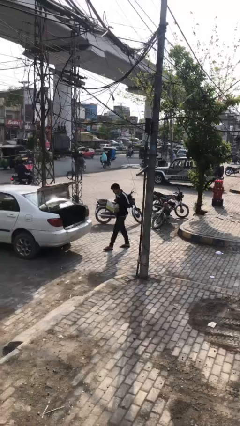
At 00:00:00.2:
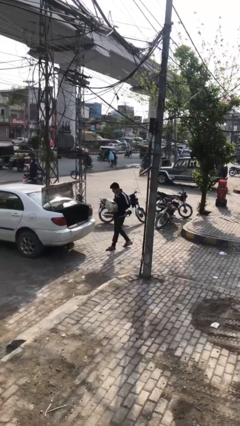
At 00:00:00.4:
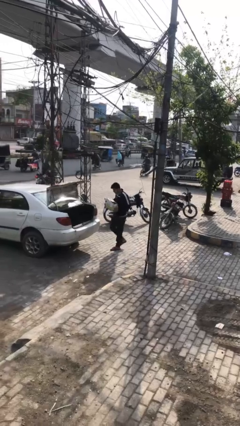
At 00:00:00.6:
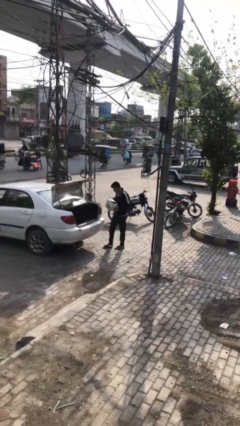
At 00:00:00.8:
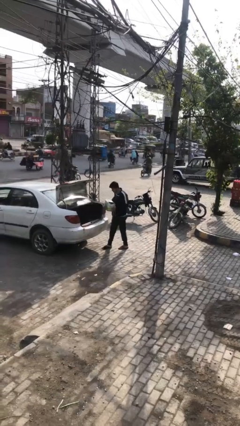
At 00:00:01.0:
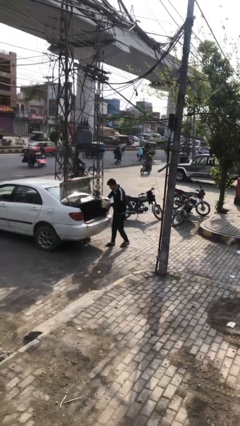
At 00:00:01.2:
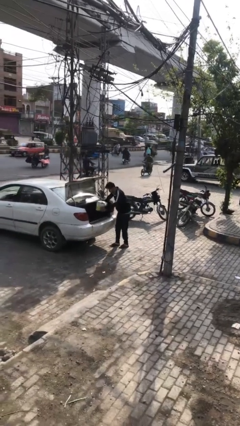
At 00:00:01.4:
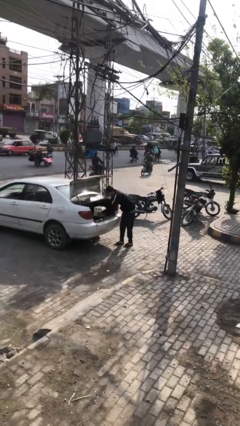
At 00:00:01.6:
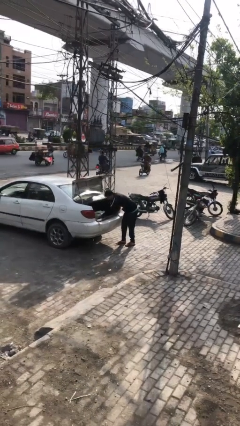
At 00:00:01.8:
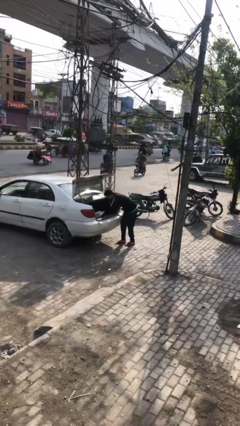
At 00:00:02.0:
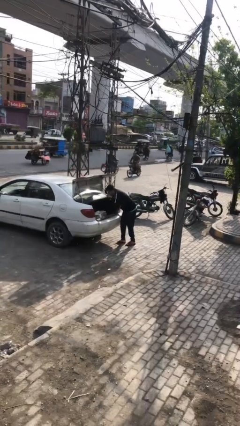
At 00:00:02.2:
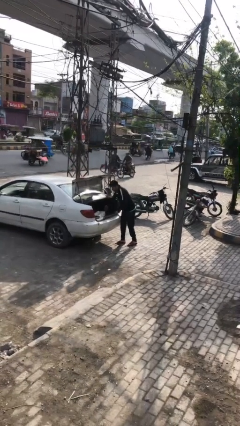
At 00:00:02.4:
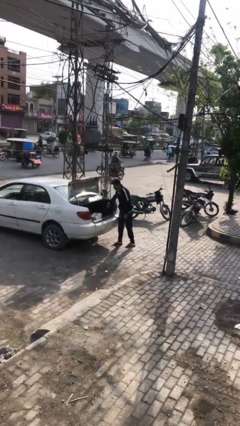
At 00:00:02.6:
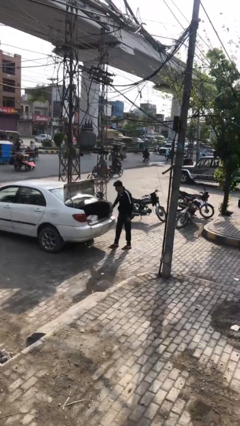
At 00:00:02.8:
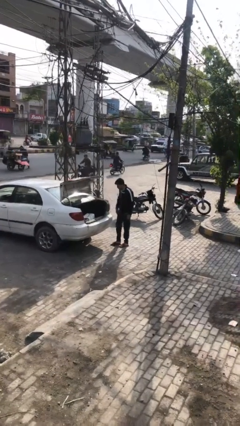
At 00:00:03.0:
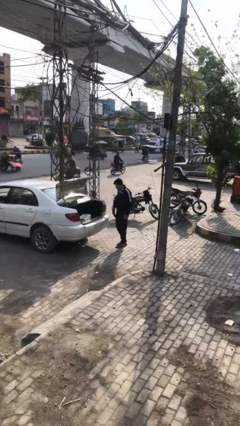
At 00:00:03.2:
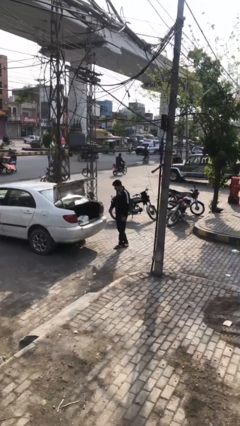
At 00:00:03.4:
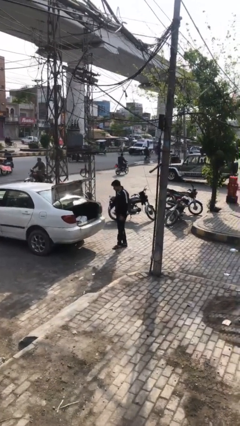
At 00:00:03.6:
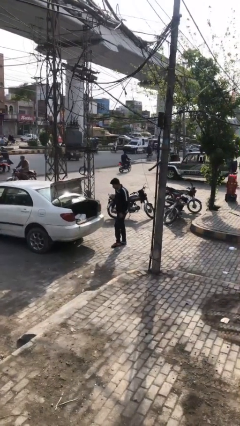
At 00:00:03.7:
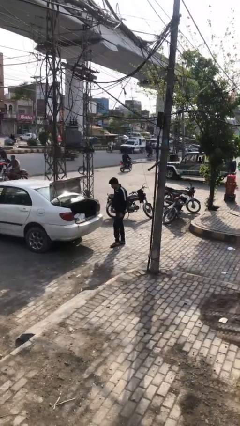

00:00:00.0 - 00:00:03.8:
person loads car

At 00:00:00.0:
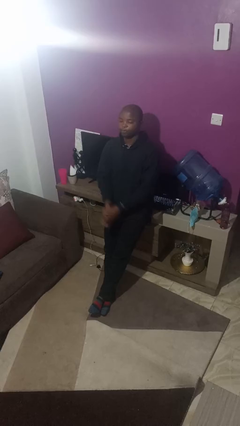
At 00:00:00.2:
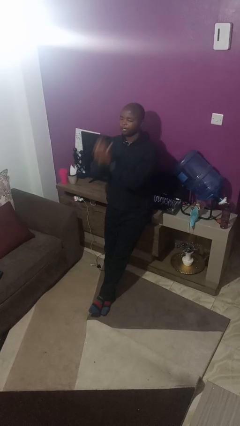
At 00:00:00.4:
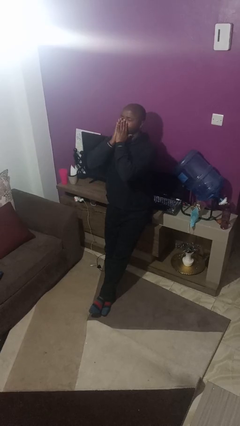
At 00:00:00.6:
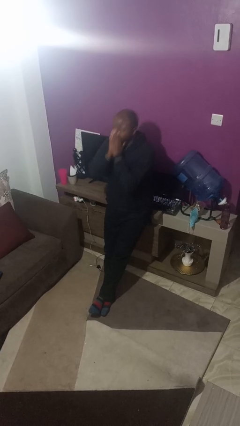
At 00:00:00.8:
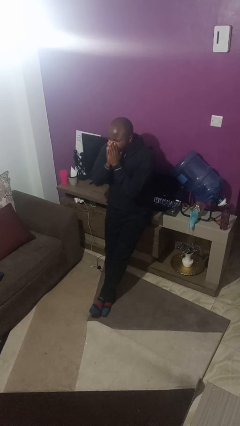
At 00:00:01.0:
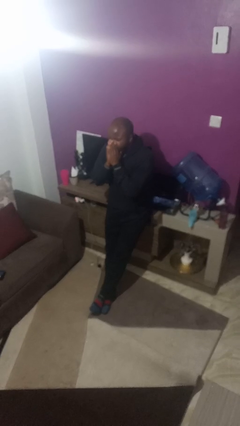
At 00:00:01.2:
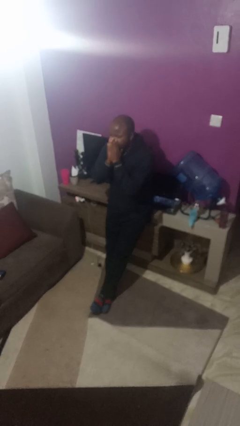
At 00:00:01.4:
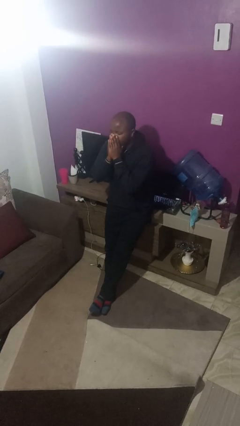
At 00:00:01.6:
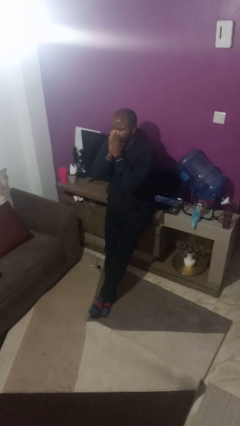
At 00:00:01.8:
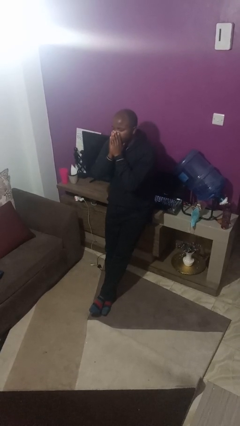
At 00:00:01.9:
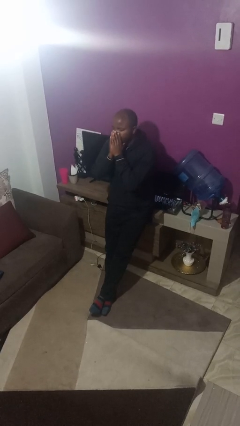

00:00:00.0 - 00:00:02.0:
person sneezes into hand

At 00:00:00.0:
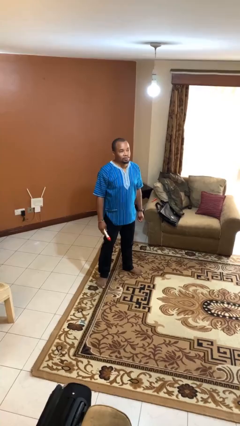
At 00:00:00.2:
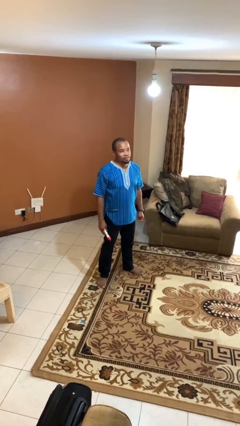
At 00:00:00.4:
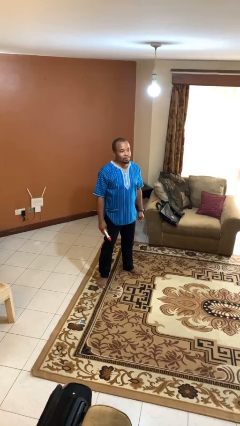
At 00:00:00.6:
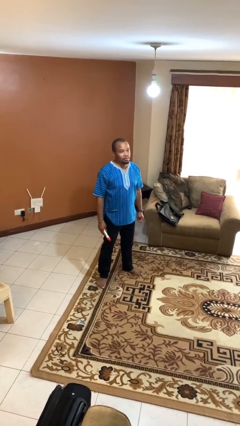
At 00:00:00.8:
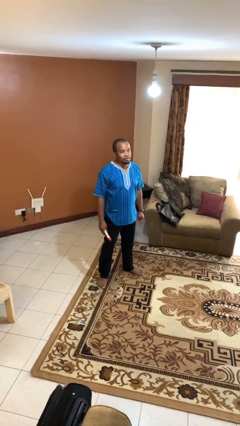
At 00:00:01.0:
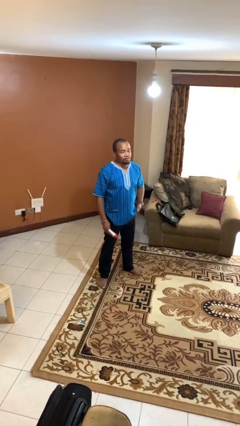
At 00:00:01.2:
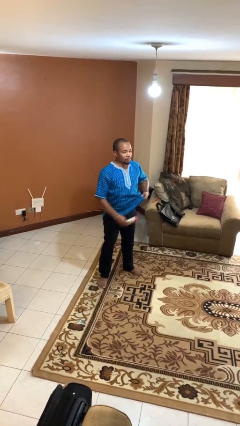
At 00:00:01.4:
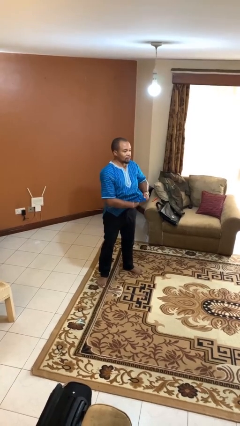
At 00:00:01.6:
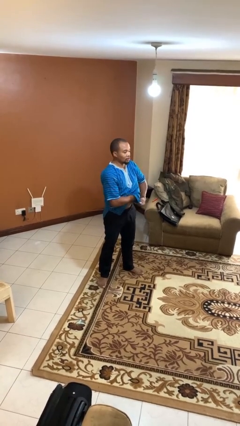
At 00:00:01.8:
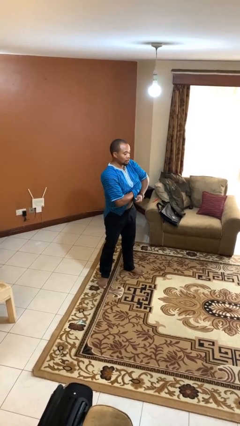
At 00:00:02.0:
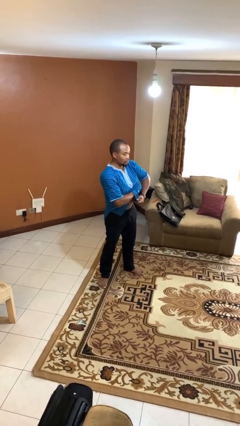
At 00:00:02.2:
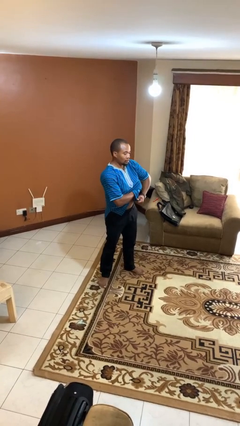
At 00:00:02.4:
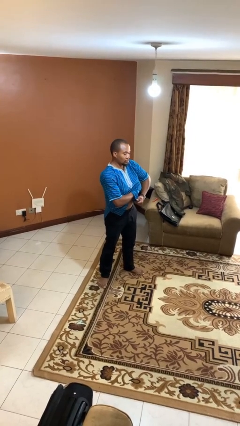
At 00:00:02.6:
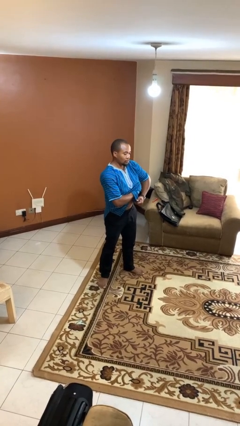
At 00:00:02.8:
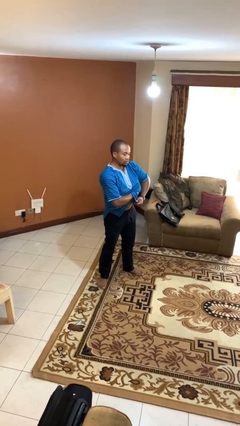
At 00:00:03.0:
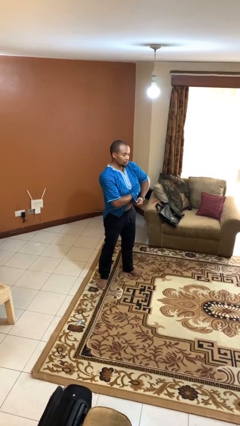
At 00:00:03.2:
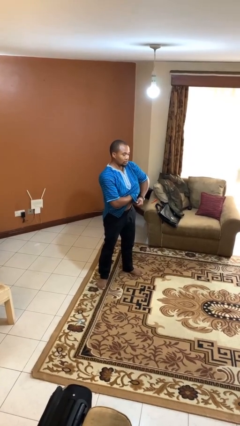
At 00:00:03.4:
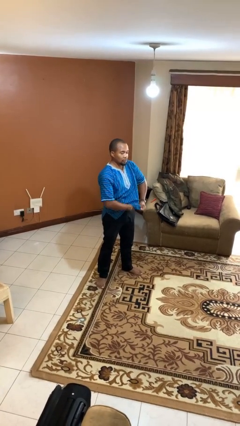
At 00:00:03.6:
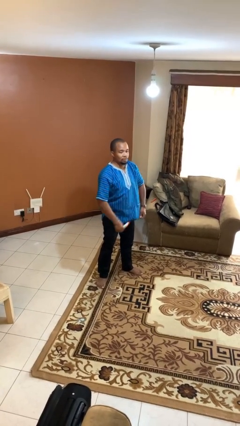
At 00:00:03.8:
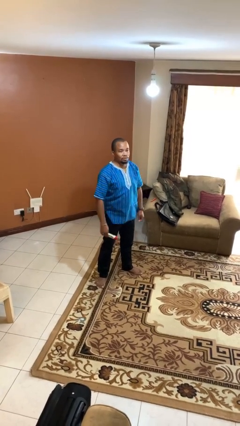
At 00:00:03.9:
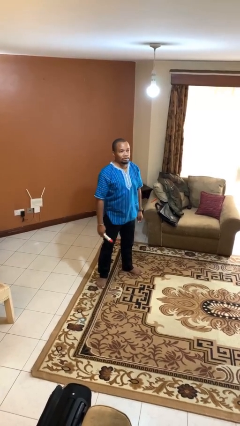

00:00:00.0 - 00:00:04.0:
person applies deodorant

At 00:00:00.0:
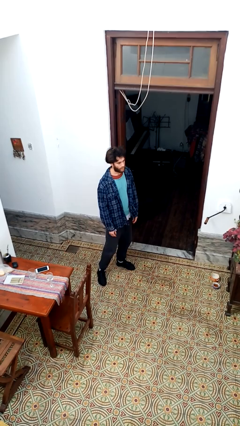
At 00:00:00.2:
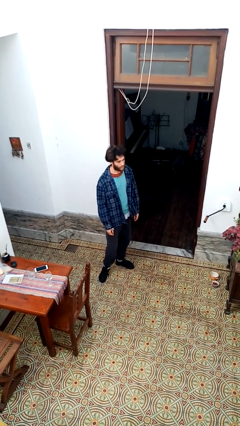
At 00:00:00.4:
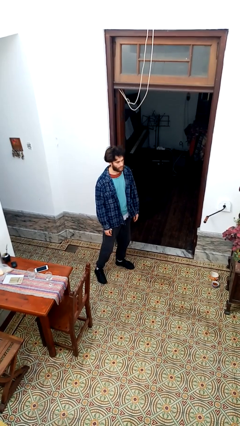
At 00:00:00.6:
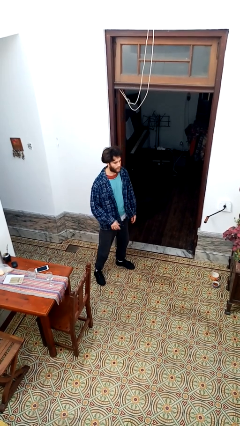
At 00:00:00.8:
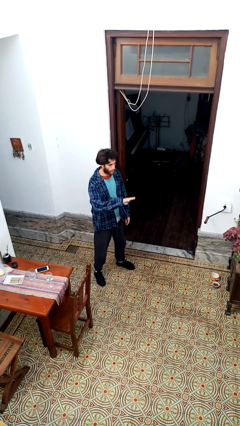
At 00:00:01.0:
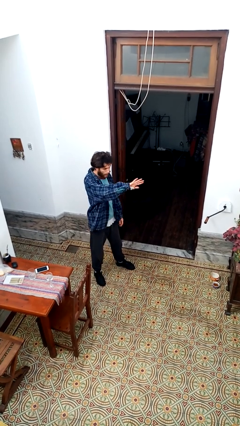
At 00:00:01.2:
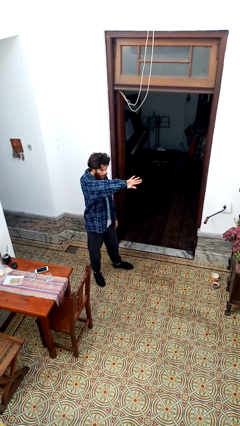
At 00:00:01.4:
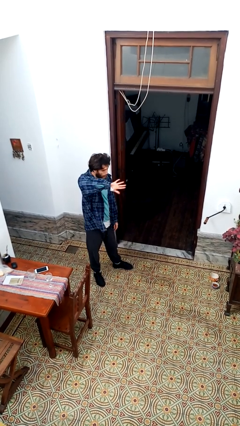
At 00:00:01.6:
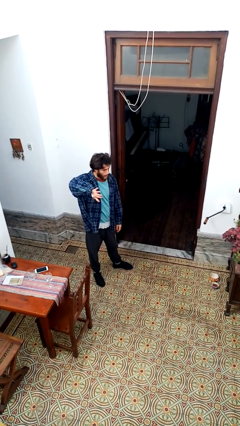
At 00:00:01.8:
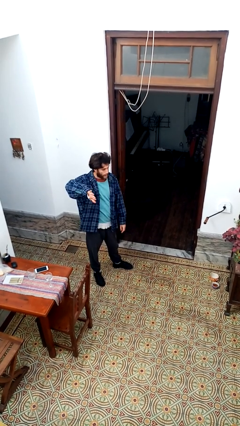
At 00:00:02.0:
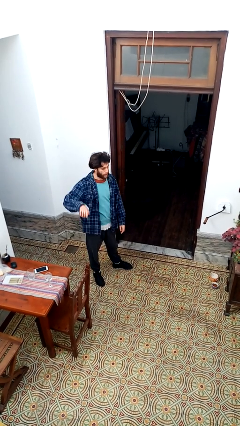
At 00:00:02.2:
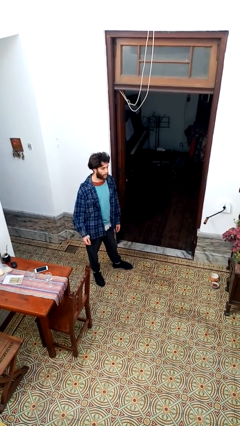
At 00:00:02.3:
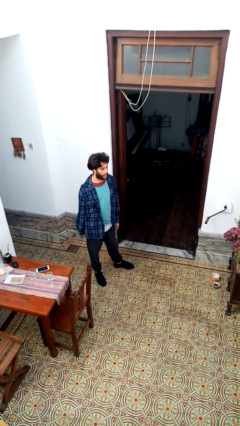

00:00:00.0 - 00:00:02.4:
person gestures swipe right

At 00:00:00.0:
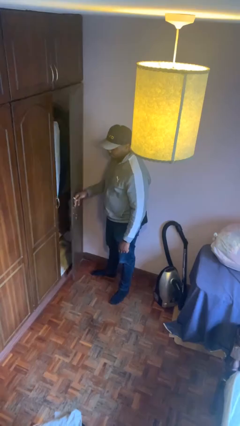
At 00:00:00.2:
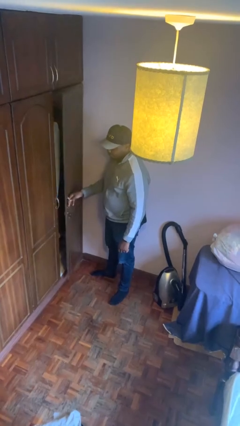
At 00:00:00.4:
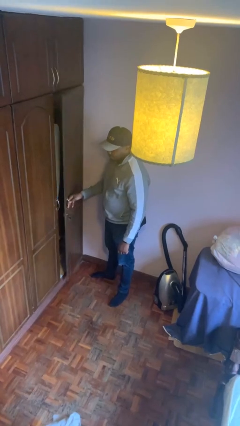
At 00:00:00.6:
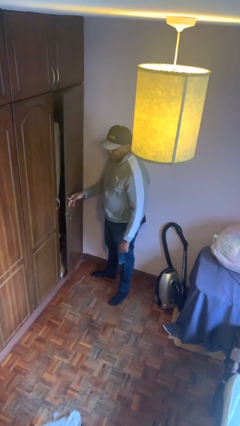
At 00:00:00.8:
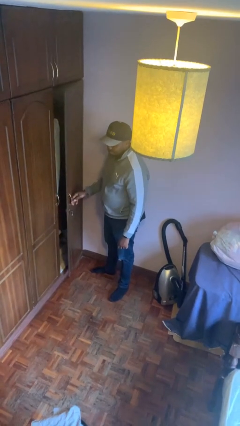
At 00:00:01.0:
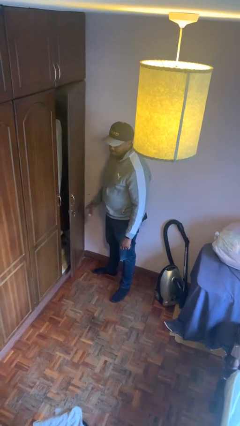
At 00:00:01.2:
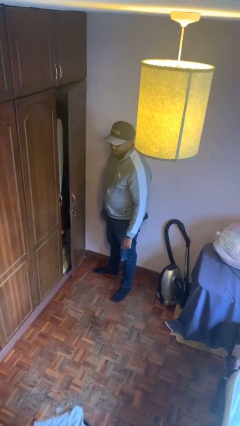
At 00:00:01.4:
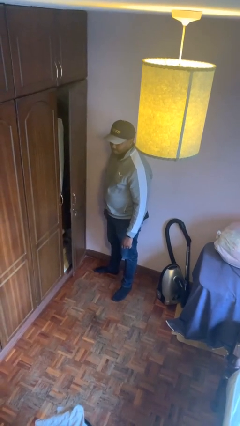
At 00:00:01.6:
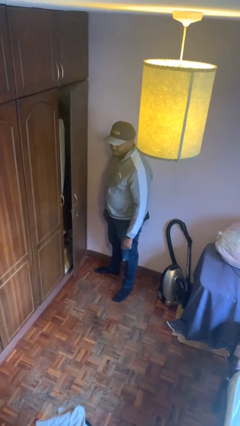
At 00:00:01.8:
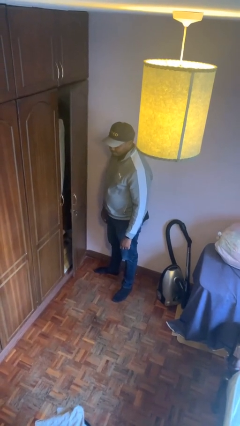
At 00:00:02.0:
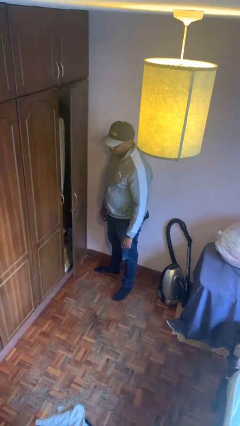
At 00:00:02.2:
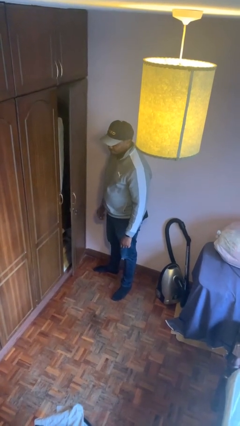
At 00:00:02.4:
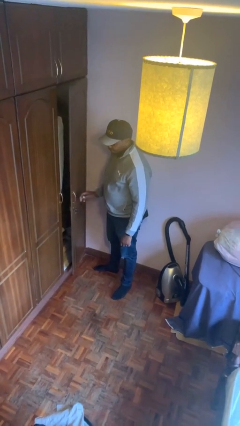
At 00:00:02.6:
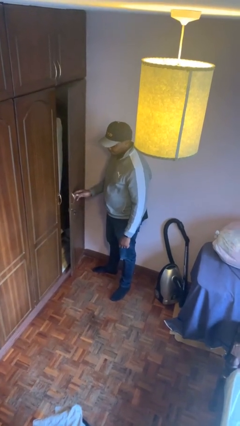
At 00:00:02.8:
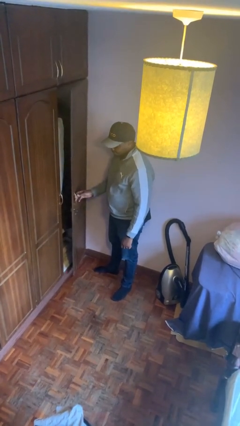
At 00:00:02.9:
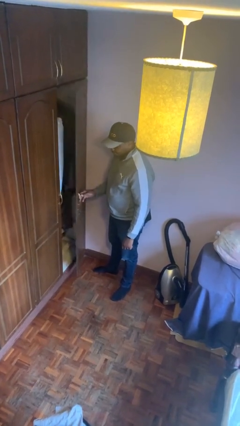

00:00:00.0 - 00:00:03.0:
person closes closet door

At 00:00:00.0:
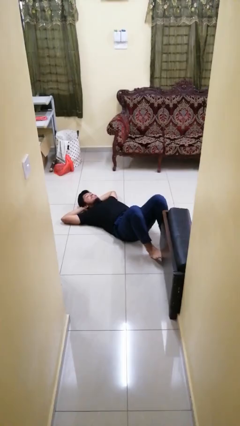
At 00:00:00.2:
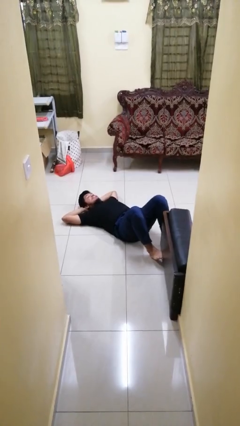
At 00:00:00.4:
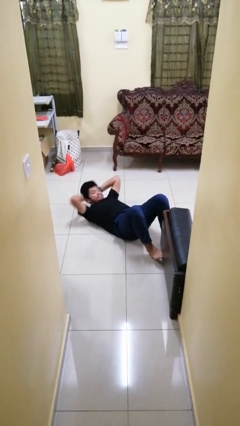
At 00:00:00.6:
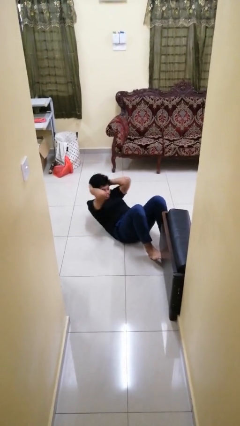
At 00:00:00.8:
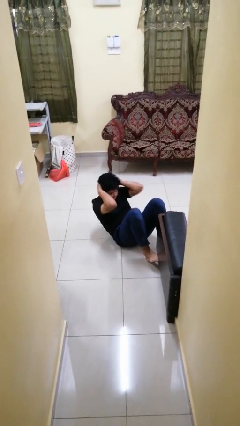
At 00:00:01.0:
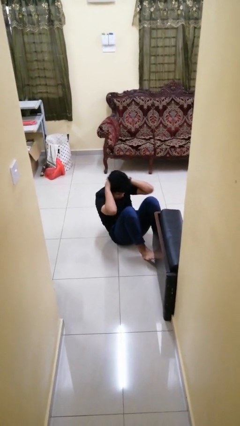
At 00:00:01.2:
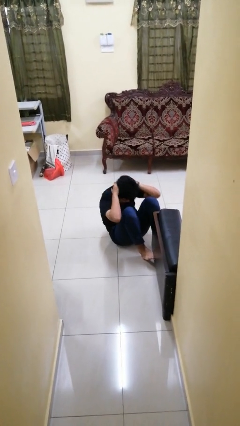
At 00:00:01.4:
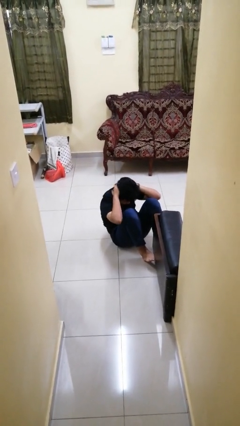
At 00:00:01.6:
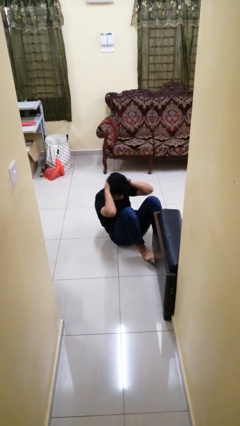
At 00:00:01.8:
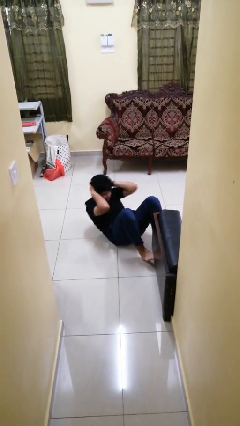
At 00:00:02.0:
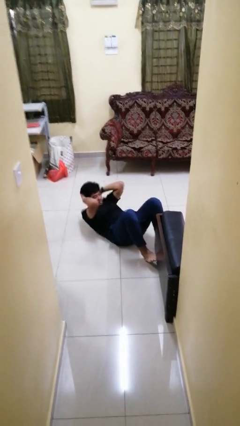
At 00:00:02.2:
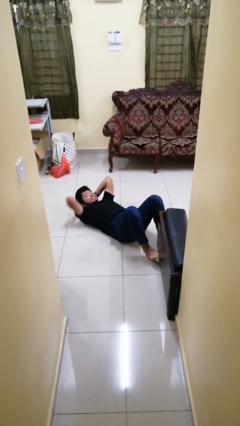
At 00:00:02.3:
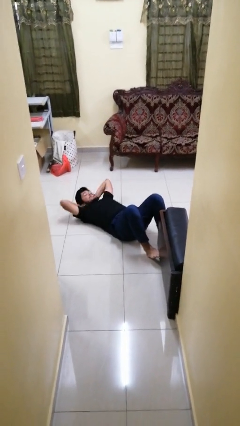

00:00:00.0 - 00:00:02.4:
person exercises with situp
